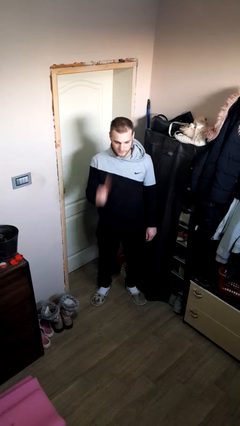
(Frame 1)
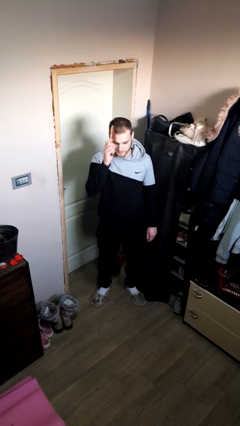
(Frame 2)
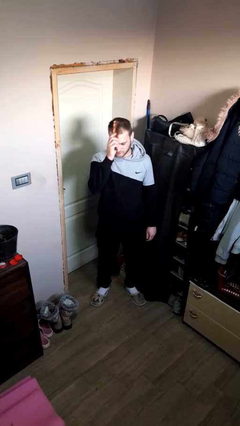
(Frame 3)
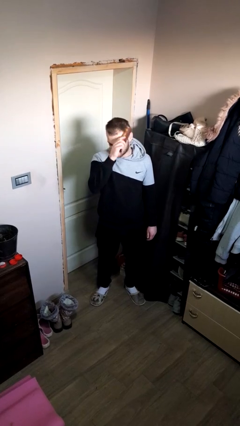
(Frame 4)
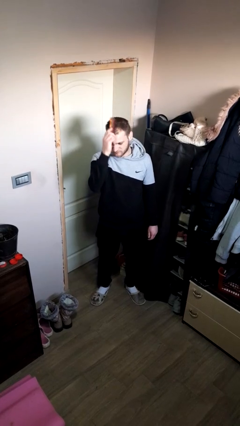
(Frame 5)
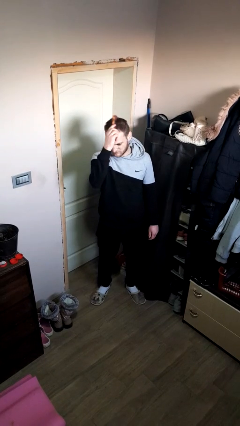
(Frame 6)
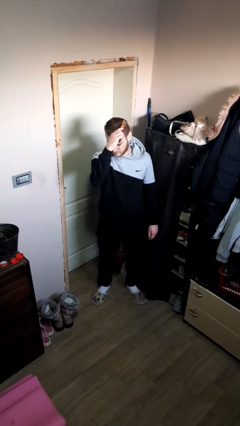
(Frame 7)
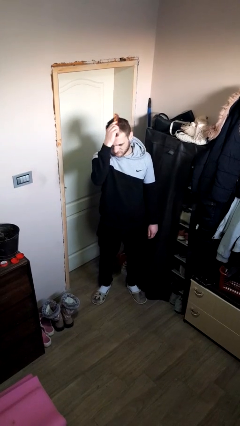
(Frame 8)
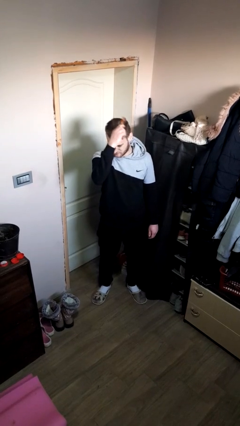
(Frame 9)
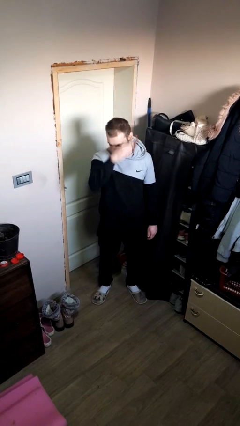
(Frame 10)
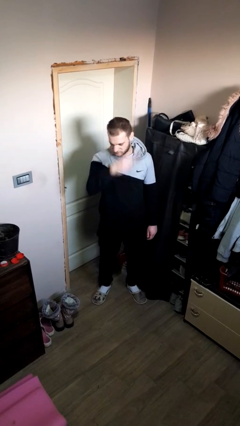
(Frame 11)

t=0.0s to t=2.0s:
person brushes hair

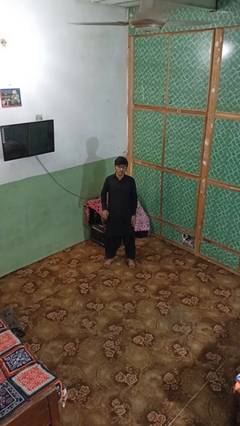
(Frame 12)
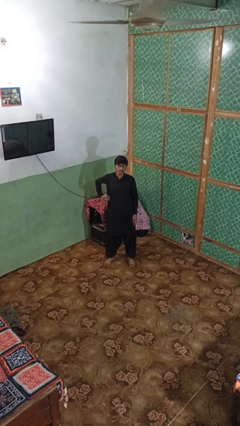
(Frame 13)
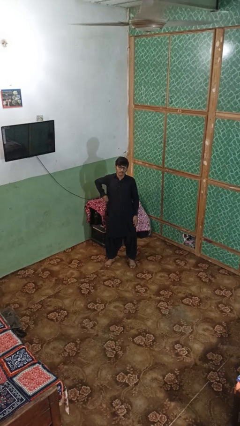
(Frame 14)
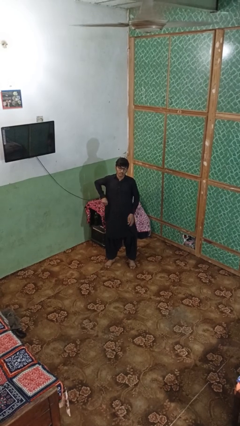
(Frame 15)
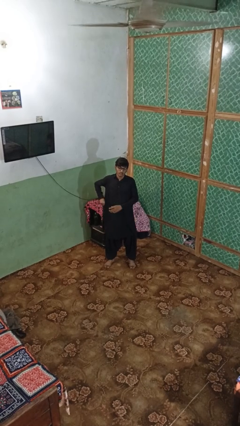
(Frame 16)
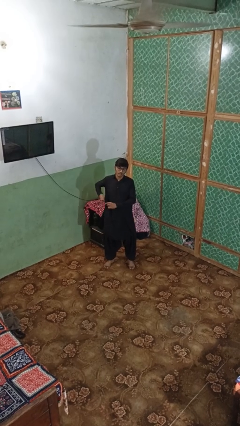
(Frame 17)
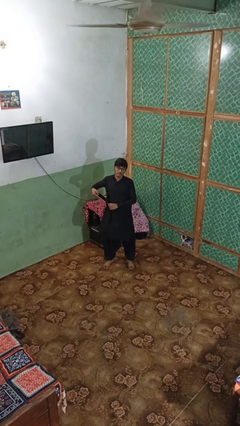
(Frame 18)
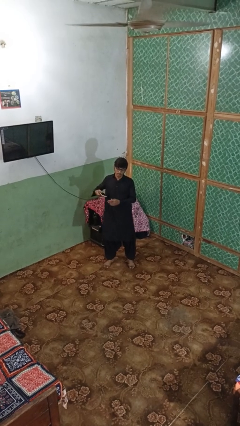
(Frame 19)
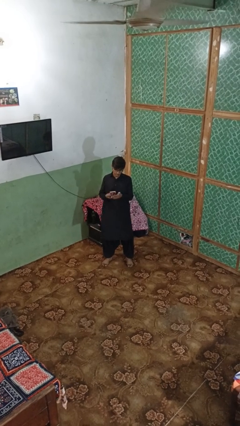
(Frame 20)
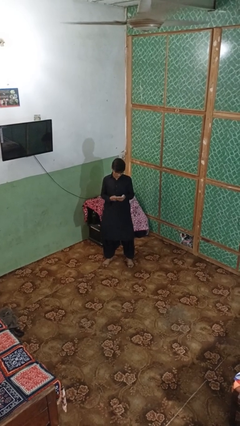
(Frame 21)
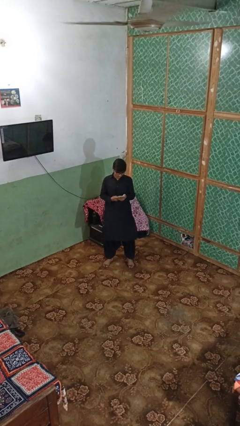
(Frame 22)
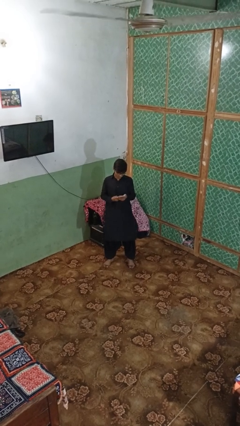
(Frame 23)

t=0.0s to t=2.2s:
person takes phone from pocket

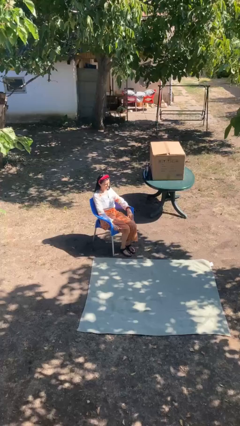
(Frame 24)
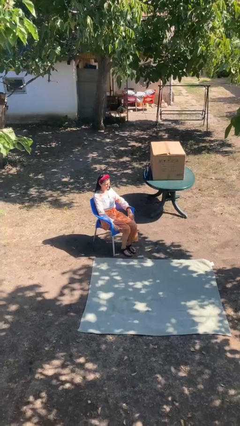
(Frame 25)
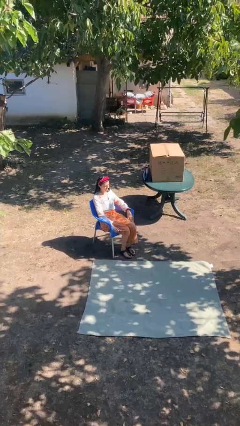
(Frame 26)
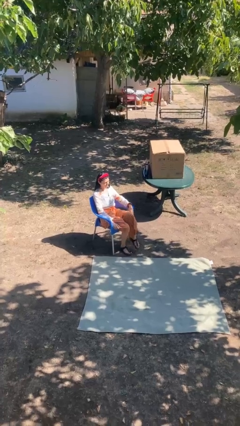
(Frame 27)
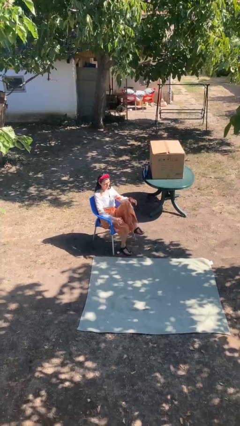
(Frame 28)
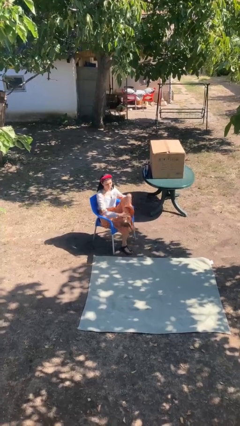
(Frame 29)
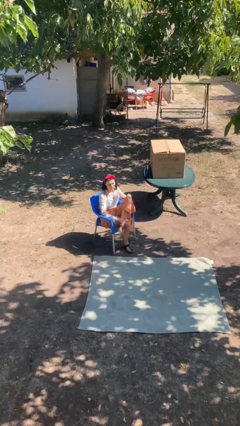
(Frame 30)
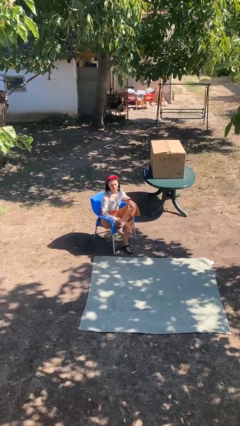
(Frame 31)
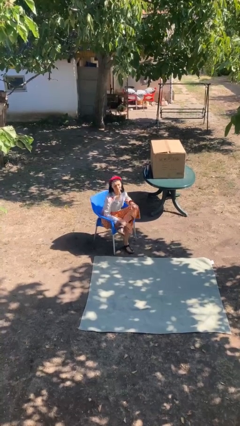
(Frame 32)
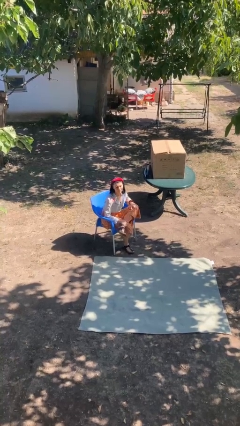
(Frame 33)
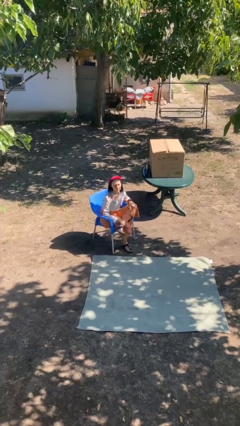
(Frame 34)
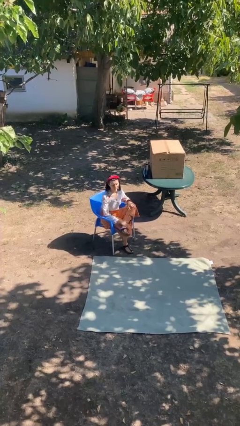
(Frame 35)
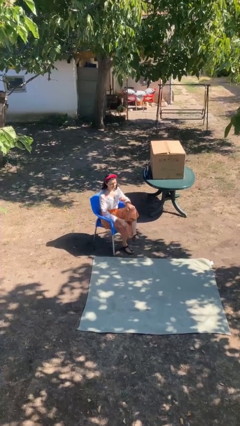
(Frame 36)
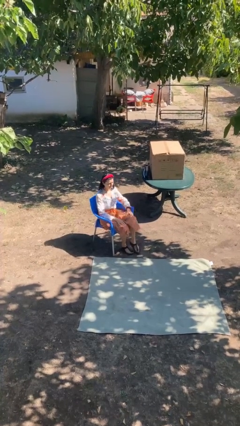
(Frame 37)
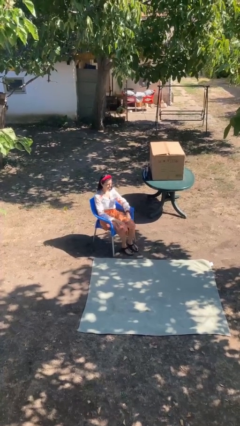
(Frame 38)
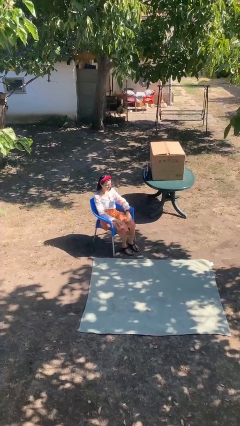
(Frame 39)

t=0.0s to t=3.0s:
person crosses legs

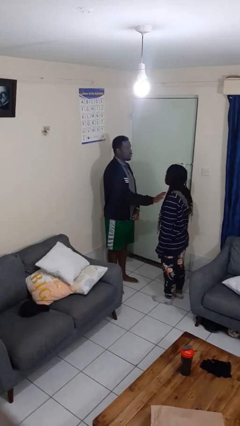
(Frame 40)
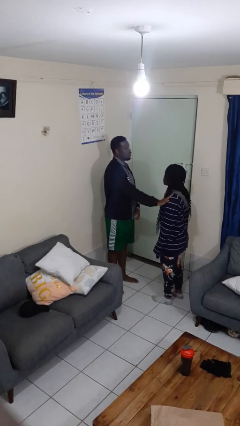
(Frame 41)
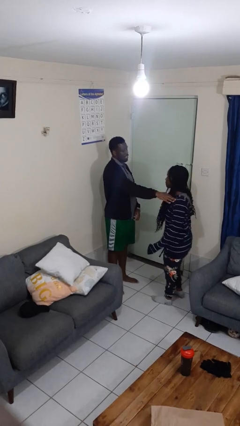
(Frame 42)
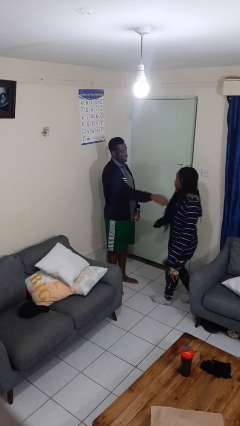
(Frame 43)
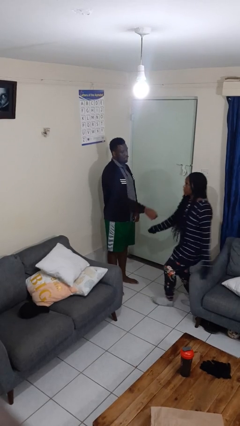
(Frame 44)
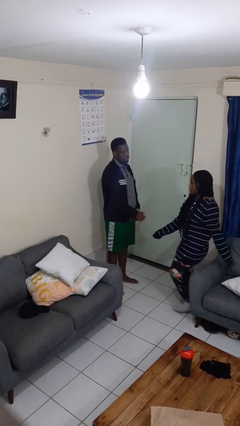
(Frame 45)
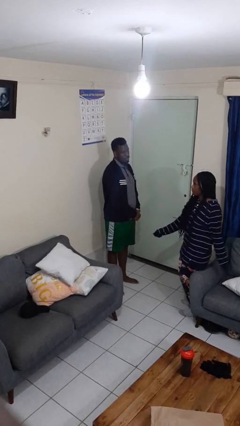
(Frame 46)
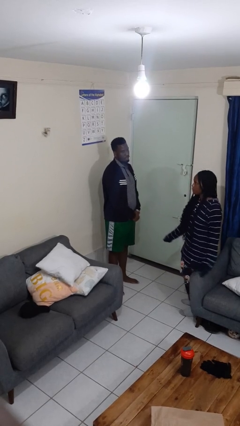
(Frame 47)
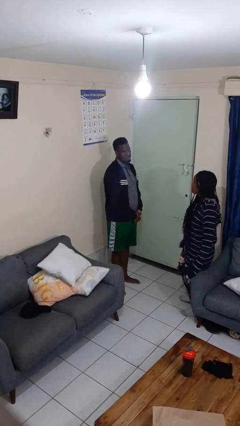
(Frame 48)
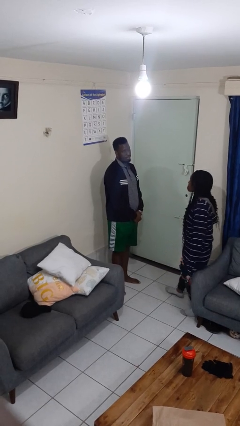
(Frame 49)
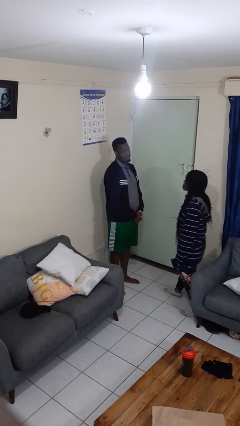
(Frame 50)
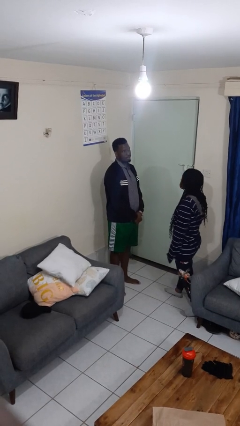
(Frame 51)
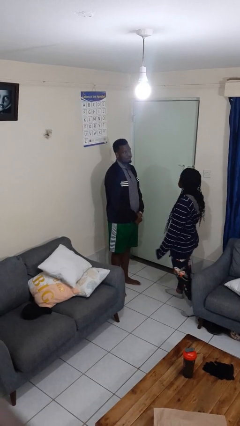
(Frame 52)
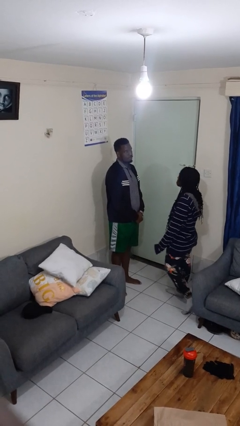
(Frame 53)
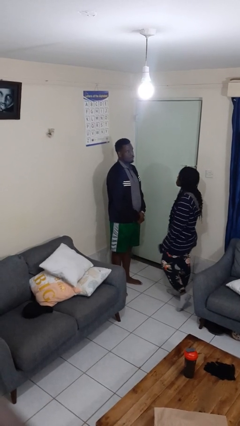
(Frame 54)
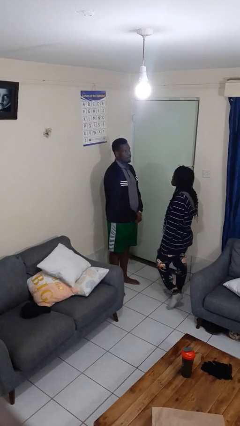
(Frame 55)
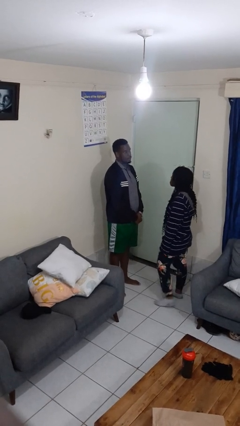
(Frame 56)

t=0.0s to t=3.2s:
person shoves person

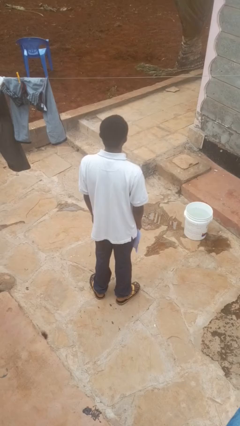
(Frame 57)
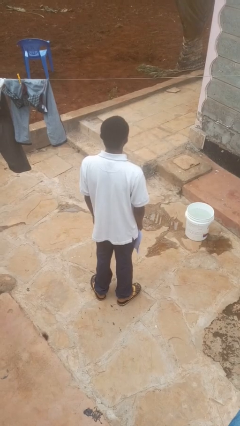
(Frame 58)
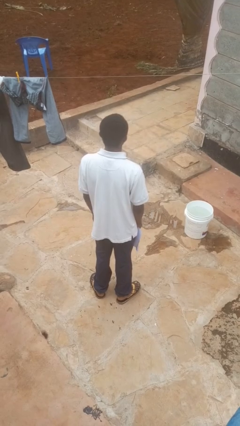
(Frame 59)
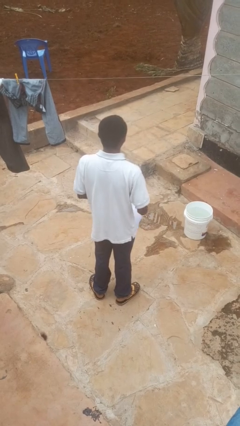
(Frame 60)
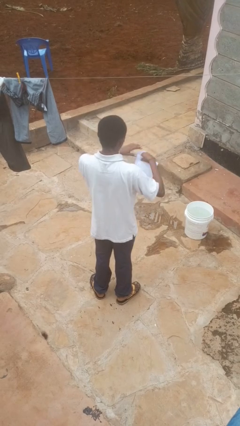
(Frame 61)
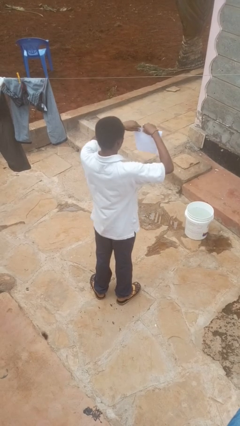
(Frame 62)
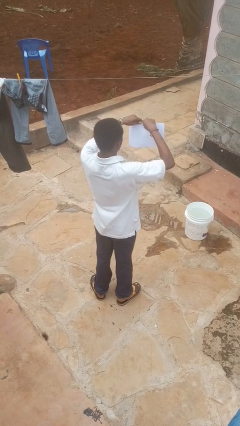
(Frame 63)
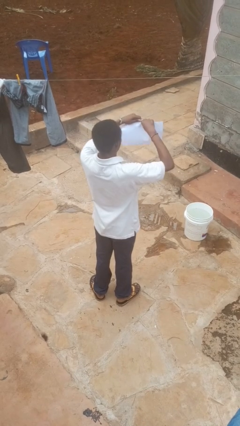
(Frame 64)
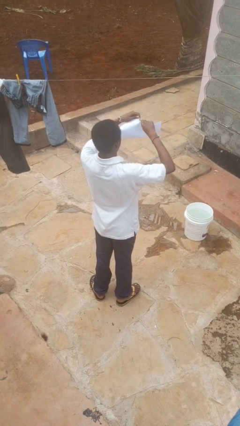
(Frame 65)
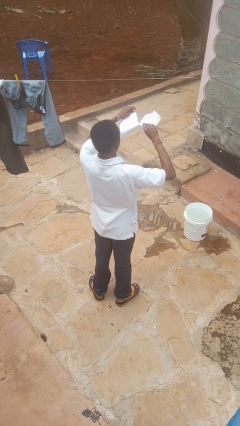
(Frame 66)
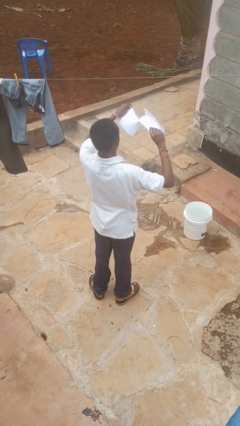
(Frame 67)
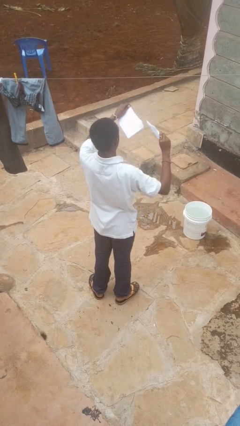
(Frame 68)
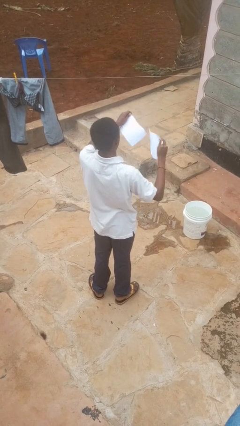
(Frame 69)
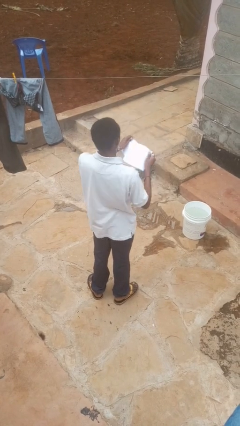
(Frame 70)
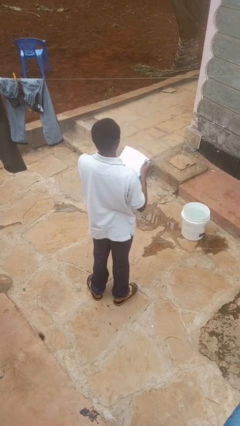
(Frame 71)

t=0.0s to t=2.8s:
person tears paper

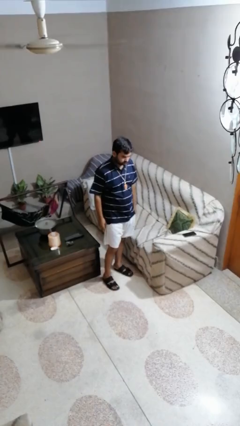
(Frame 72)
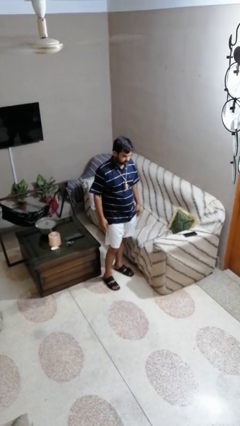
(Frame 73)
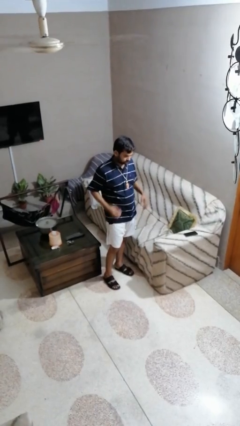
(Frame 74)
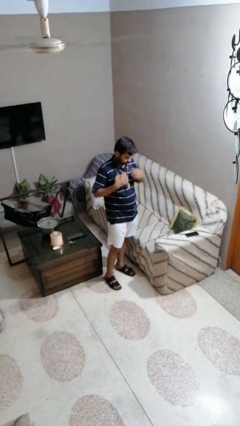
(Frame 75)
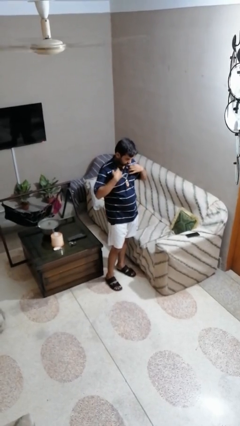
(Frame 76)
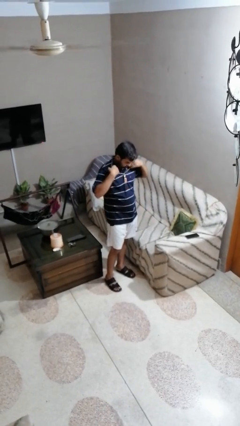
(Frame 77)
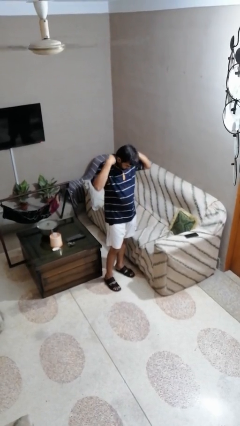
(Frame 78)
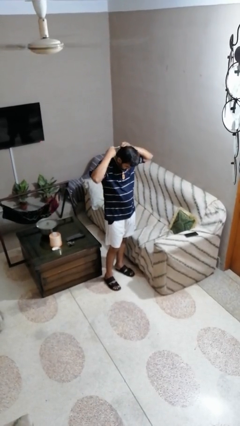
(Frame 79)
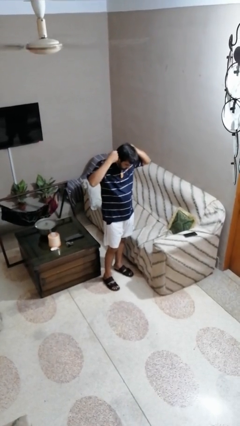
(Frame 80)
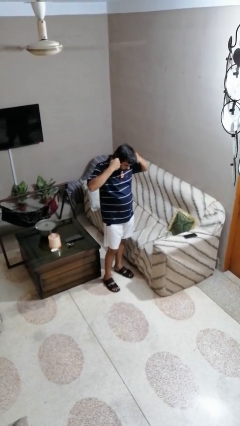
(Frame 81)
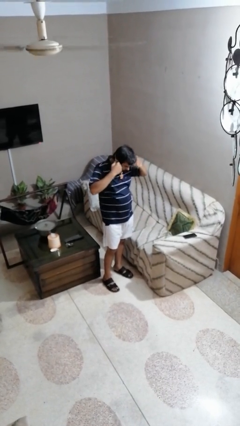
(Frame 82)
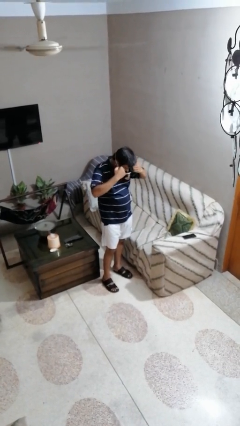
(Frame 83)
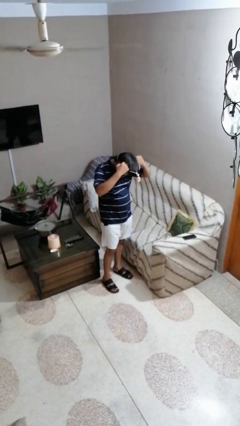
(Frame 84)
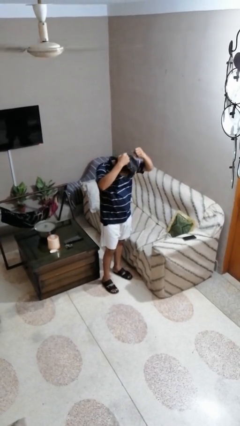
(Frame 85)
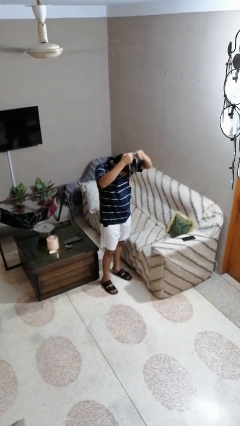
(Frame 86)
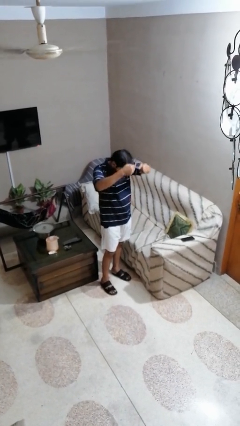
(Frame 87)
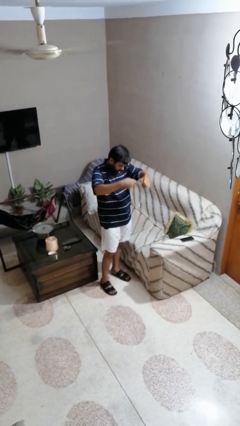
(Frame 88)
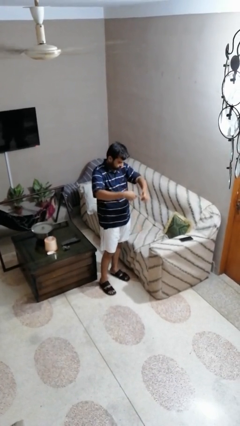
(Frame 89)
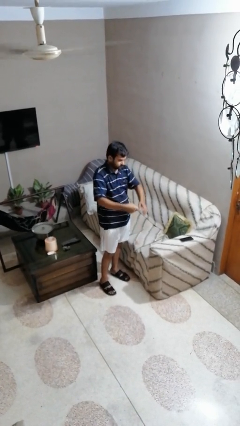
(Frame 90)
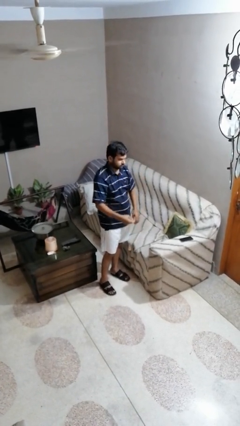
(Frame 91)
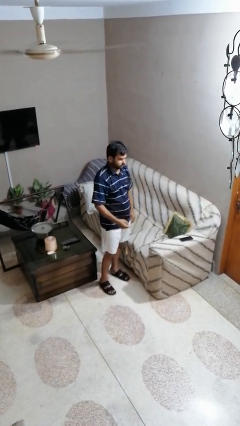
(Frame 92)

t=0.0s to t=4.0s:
person takes off necklace
